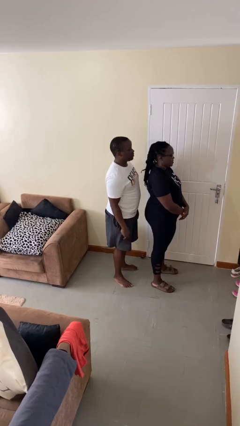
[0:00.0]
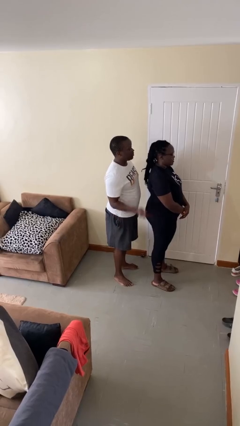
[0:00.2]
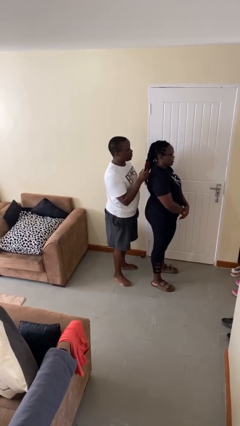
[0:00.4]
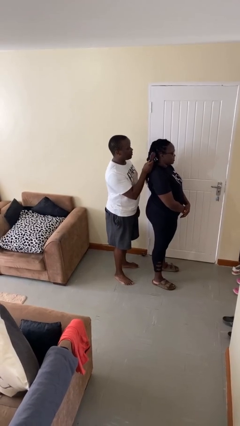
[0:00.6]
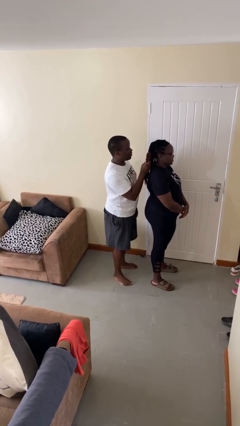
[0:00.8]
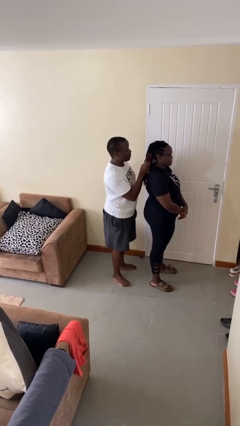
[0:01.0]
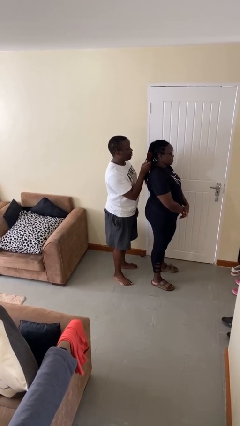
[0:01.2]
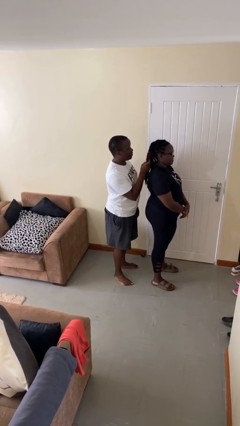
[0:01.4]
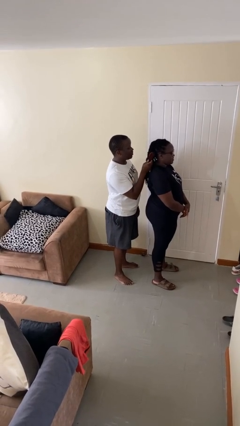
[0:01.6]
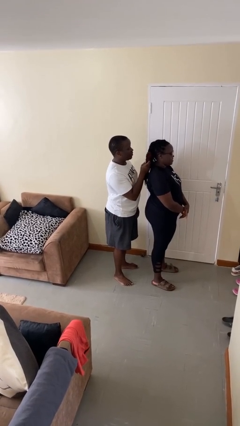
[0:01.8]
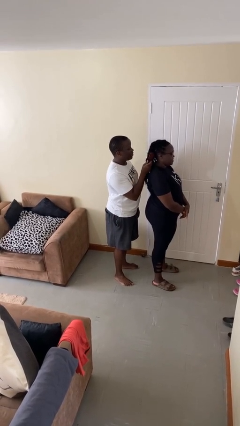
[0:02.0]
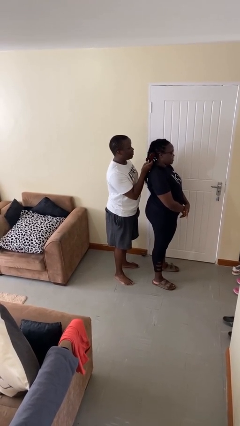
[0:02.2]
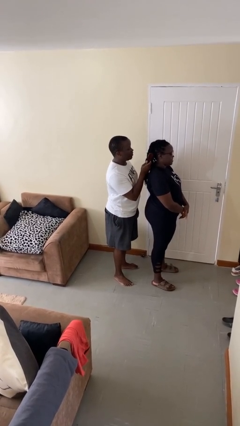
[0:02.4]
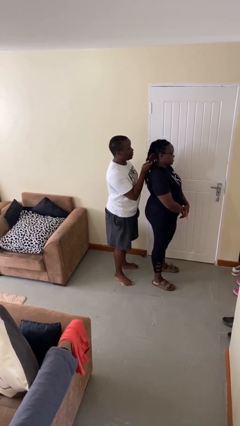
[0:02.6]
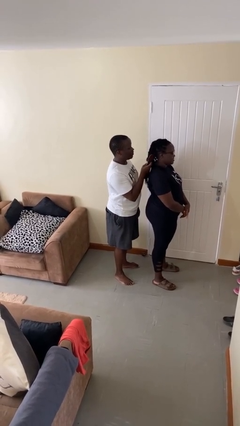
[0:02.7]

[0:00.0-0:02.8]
person brushes hair of person

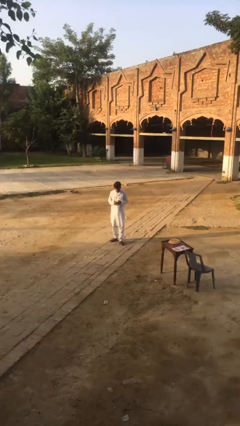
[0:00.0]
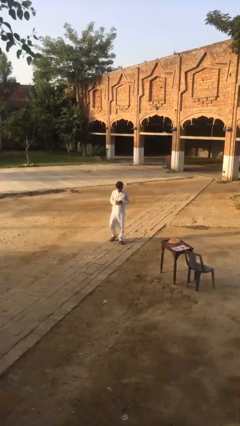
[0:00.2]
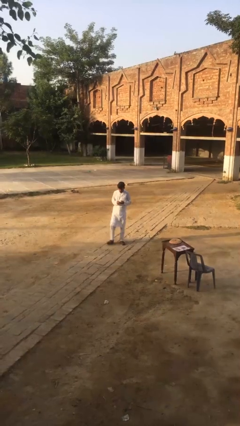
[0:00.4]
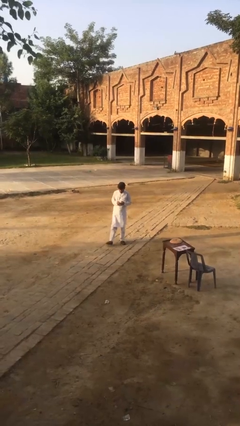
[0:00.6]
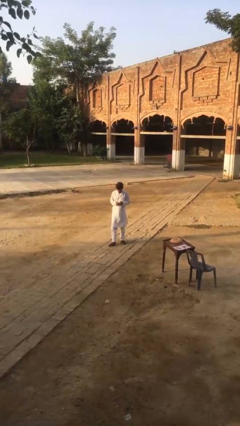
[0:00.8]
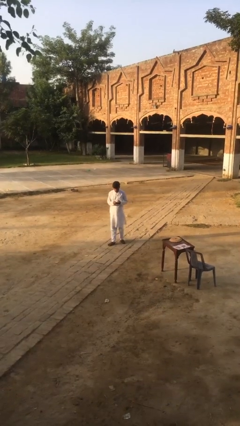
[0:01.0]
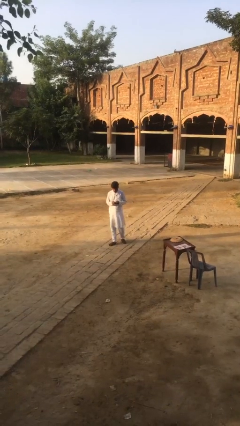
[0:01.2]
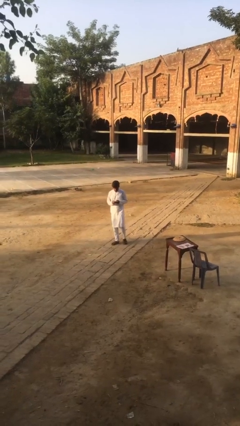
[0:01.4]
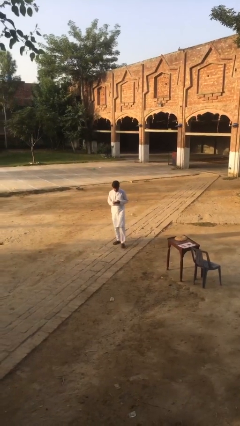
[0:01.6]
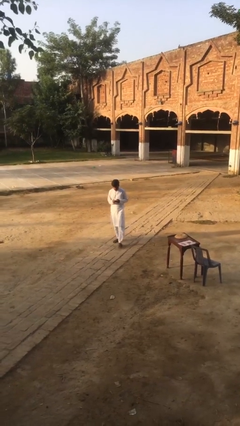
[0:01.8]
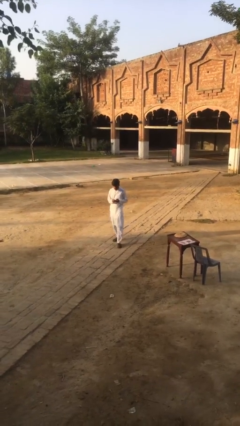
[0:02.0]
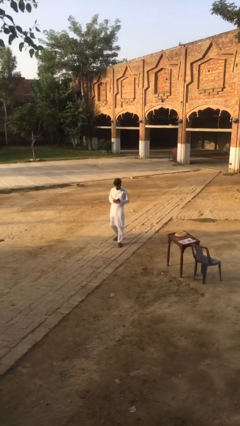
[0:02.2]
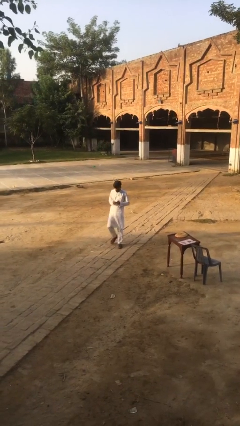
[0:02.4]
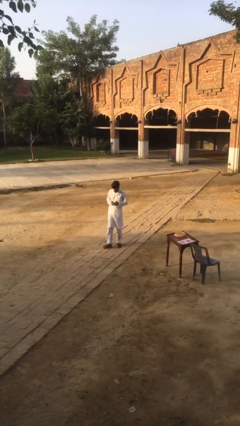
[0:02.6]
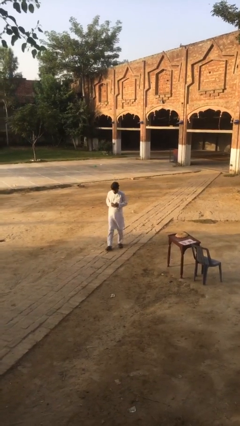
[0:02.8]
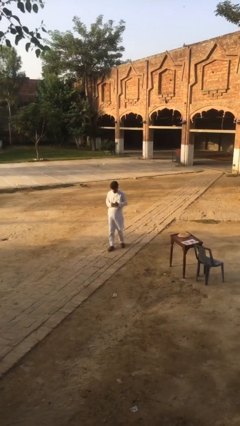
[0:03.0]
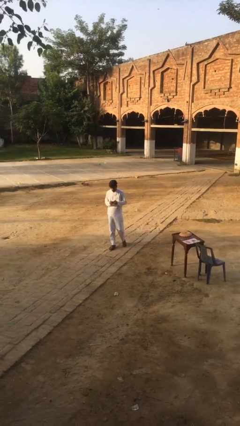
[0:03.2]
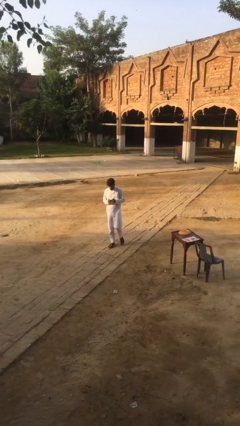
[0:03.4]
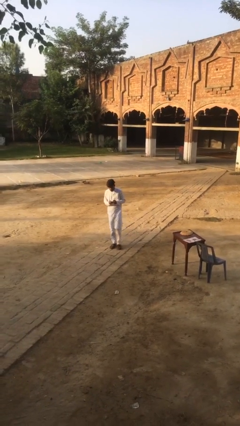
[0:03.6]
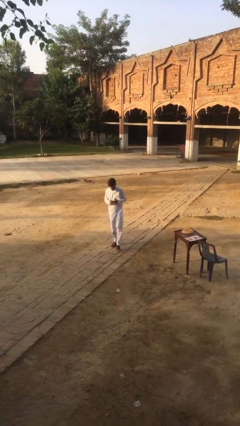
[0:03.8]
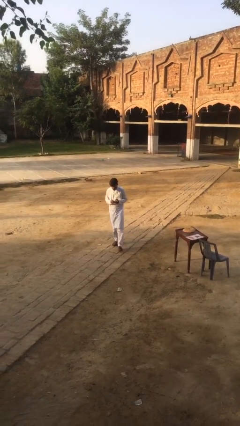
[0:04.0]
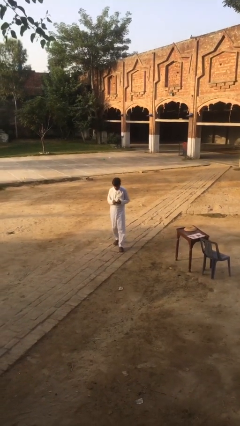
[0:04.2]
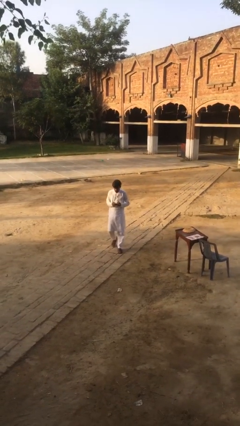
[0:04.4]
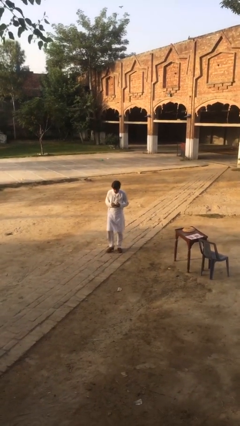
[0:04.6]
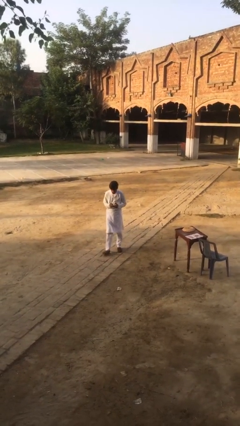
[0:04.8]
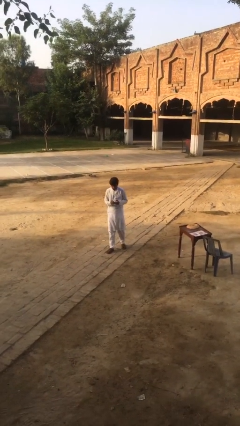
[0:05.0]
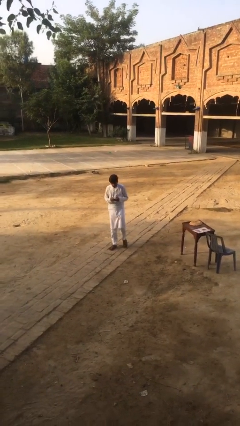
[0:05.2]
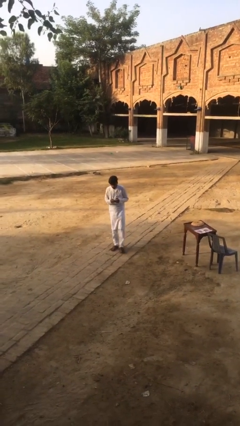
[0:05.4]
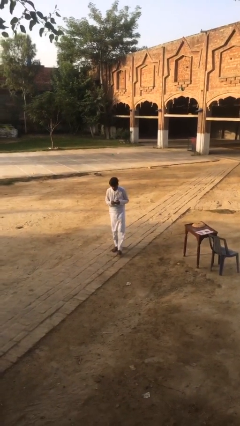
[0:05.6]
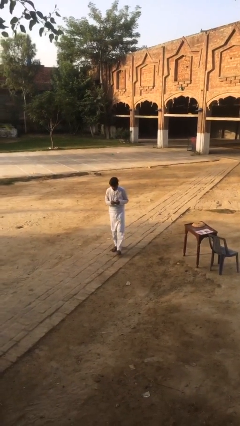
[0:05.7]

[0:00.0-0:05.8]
person texts on phone

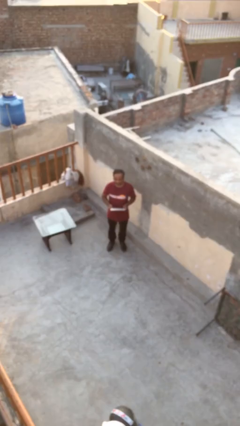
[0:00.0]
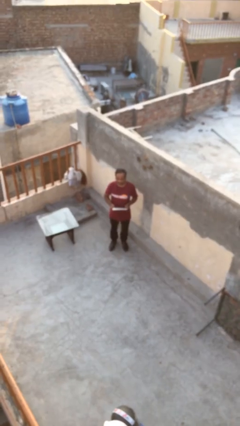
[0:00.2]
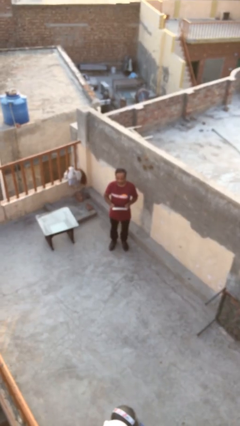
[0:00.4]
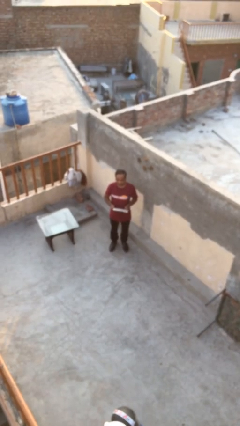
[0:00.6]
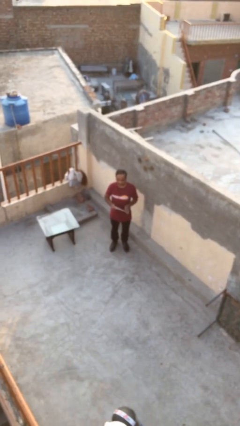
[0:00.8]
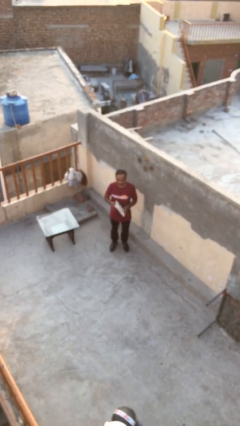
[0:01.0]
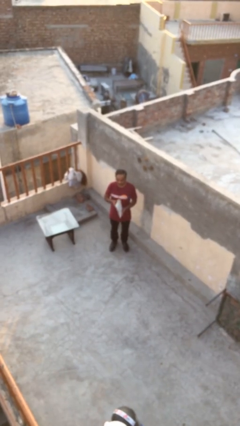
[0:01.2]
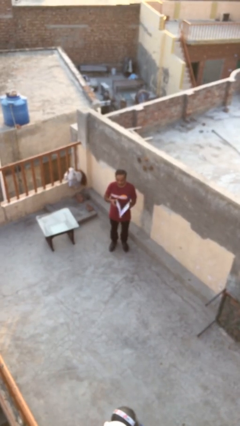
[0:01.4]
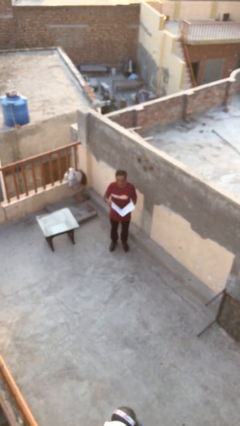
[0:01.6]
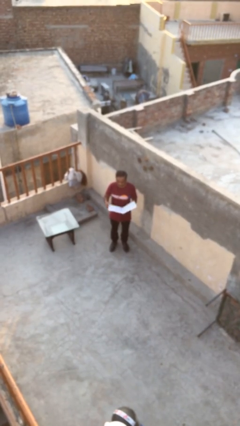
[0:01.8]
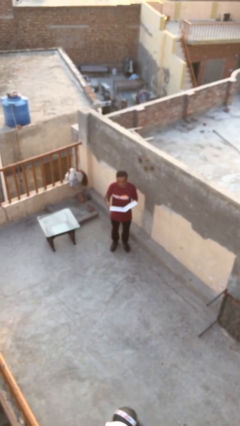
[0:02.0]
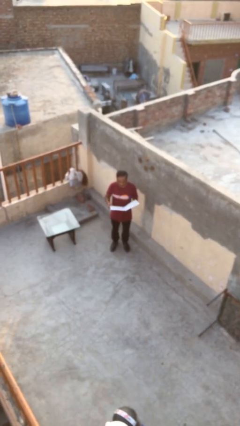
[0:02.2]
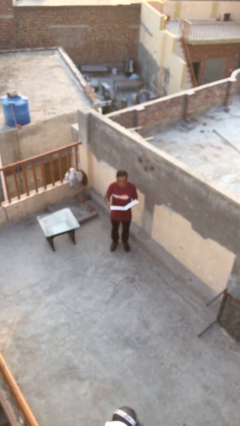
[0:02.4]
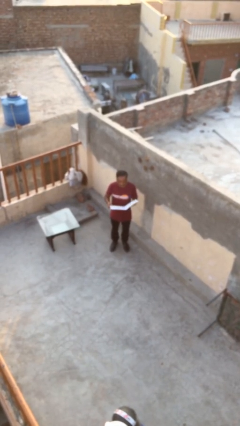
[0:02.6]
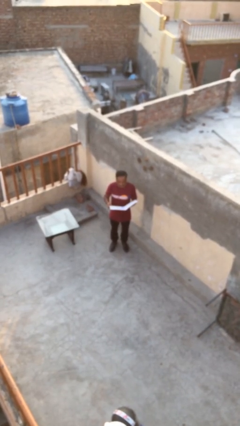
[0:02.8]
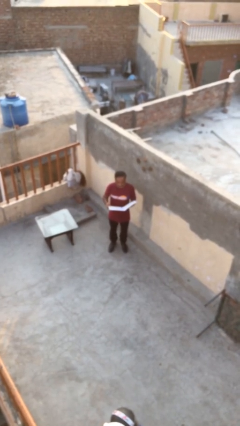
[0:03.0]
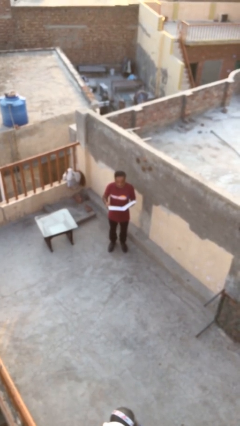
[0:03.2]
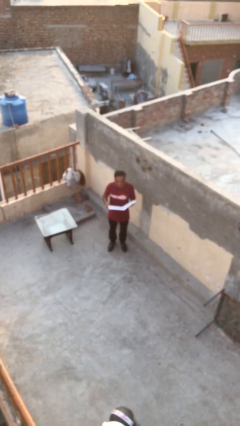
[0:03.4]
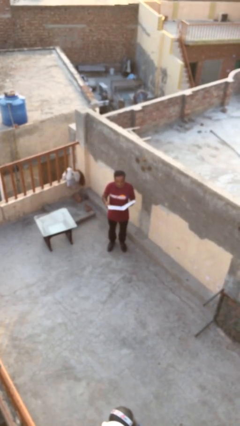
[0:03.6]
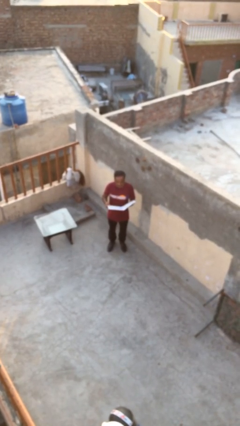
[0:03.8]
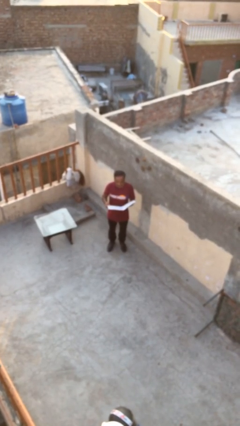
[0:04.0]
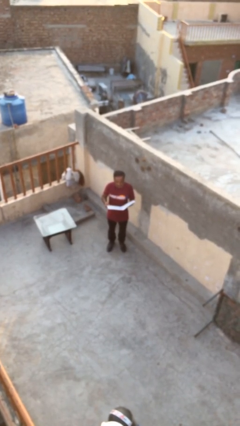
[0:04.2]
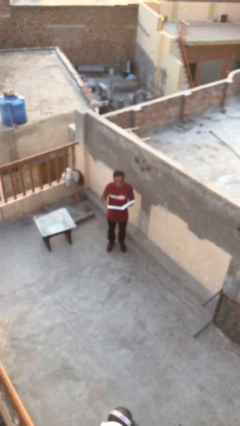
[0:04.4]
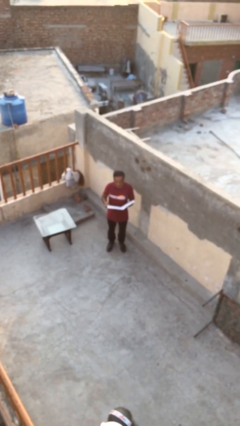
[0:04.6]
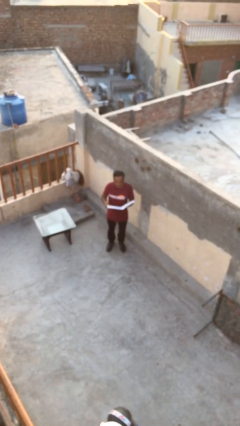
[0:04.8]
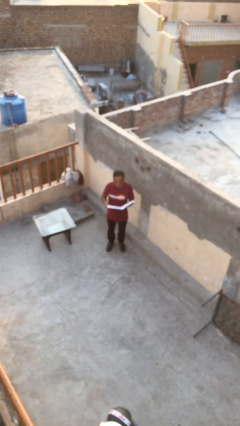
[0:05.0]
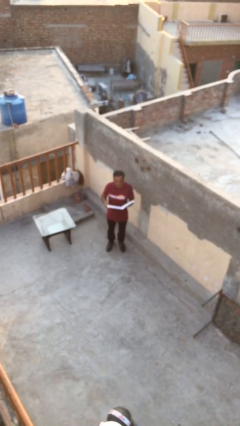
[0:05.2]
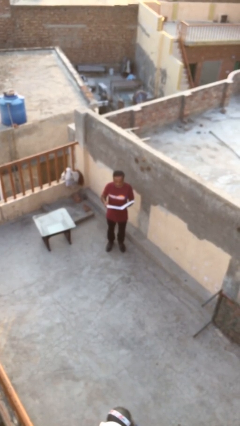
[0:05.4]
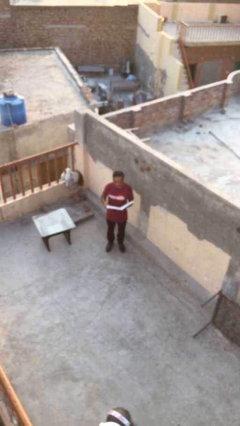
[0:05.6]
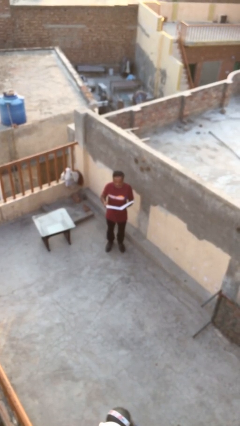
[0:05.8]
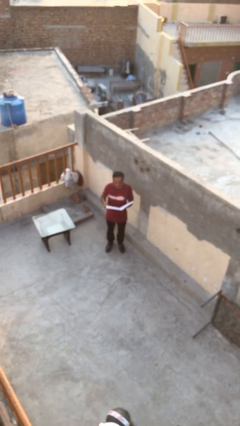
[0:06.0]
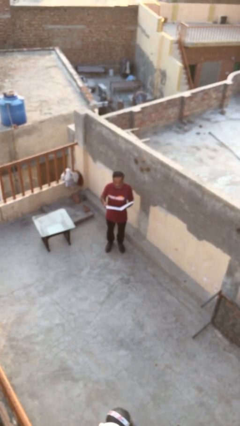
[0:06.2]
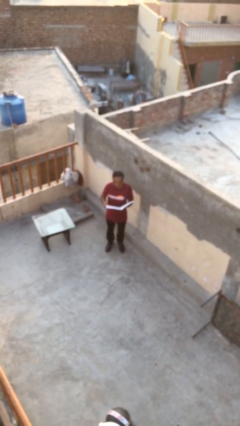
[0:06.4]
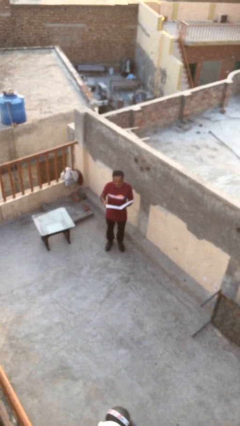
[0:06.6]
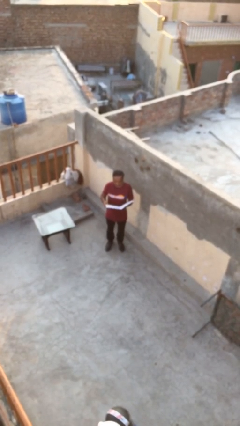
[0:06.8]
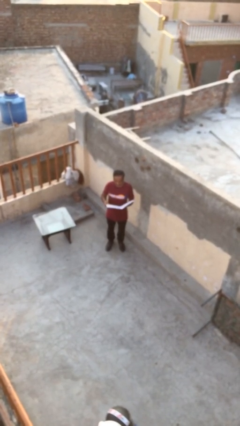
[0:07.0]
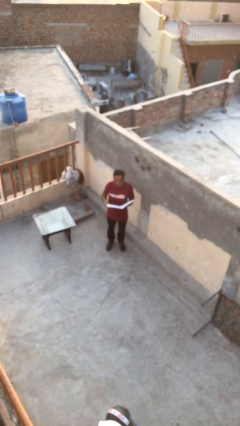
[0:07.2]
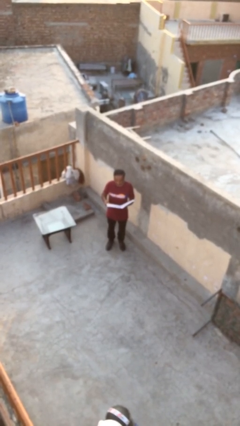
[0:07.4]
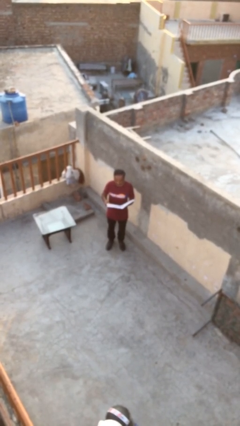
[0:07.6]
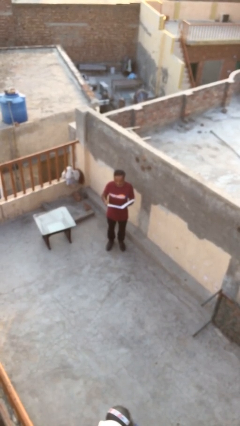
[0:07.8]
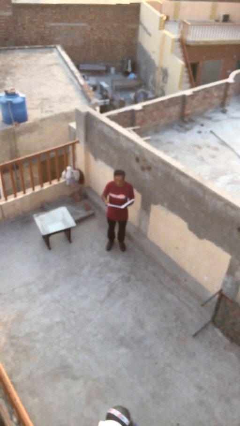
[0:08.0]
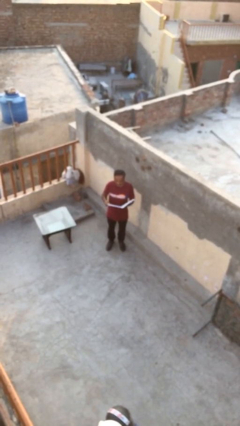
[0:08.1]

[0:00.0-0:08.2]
person reads document

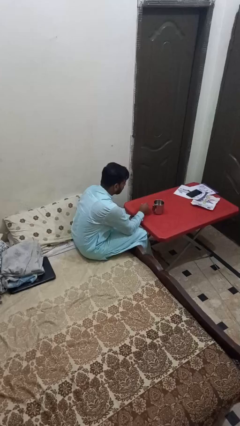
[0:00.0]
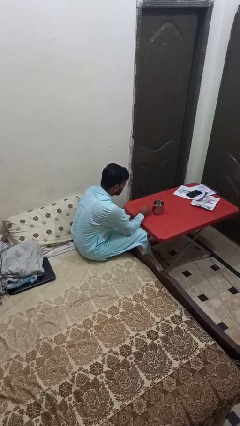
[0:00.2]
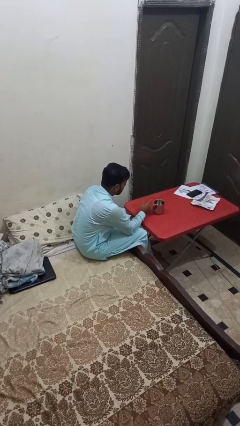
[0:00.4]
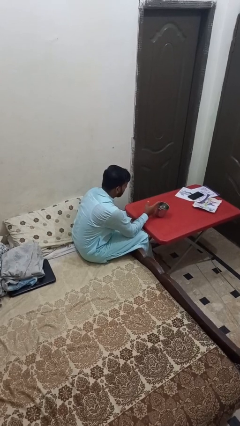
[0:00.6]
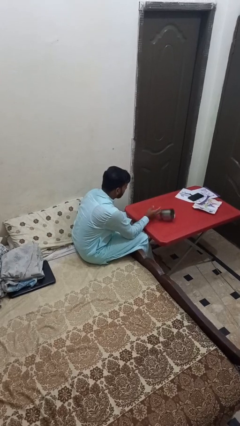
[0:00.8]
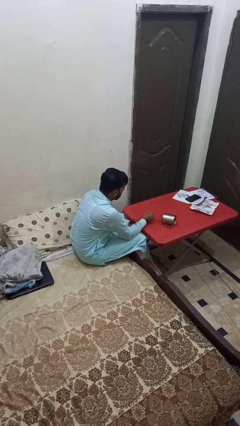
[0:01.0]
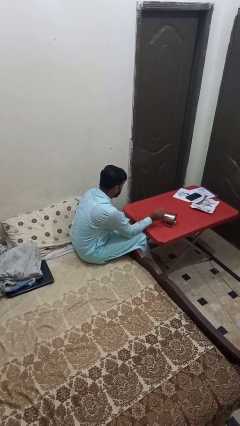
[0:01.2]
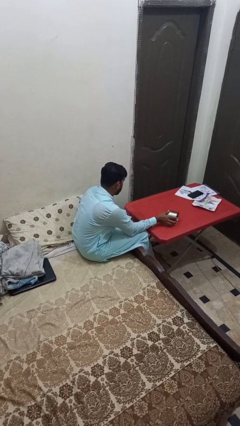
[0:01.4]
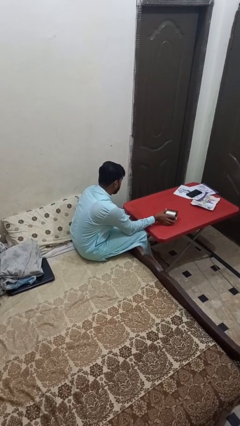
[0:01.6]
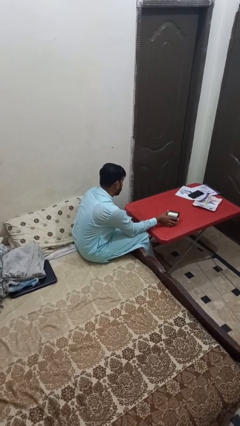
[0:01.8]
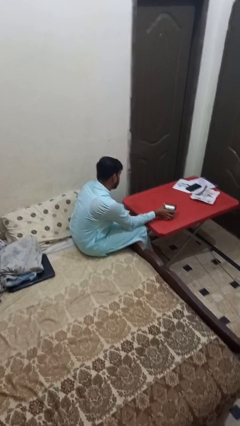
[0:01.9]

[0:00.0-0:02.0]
person knocks over glass
